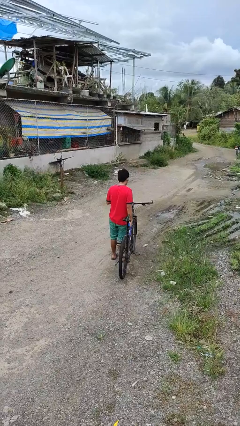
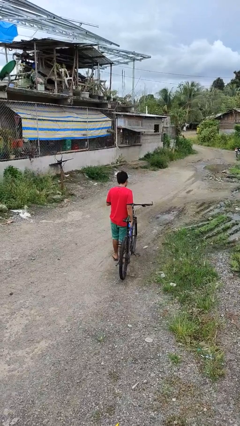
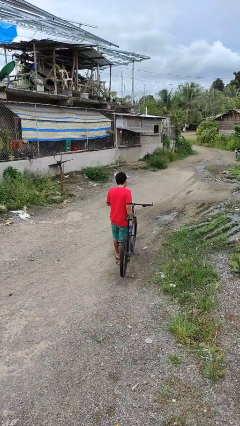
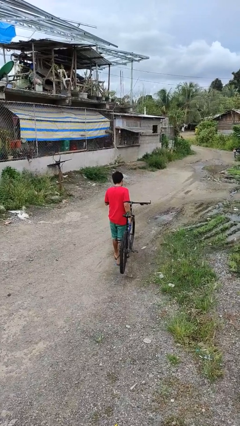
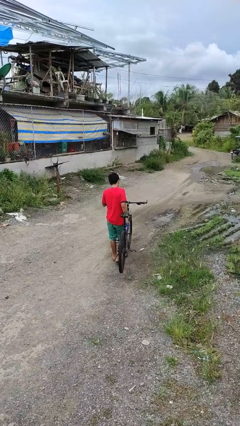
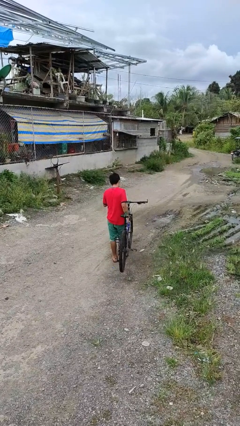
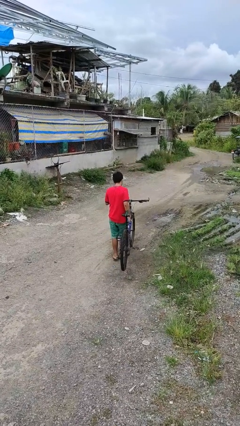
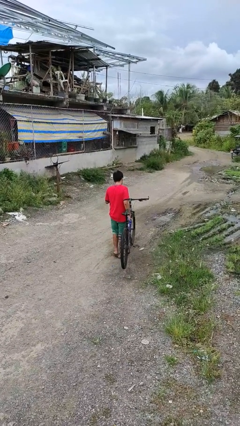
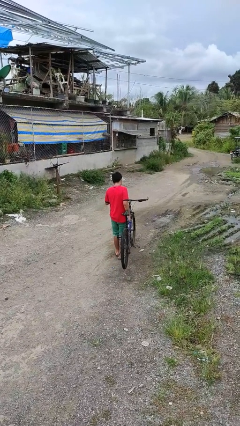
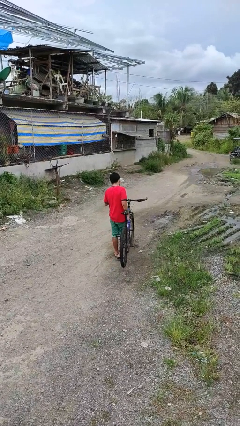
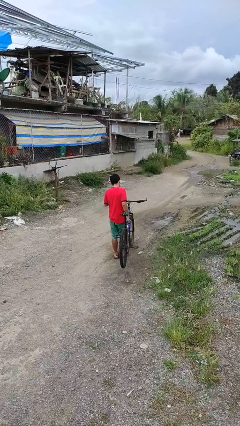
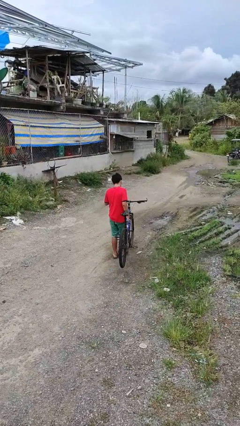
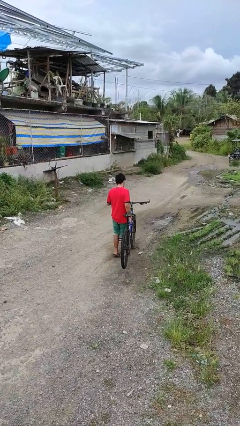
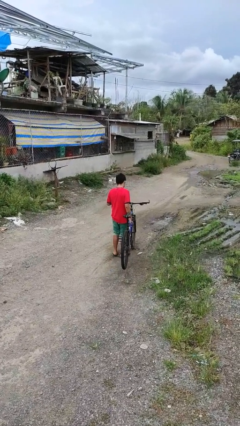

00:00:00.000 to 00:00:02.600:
person carries bicycle

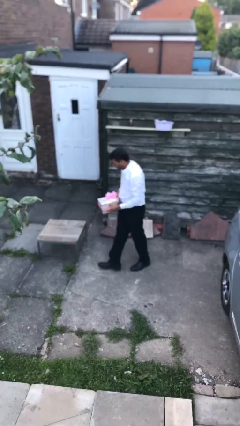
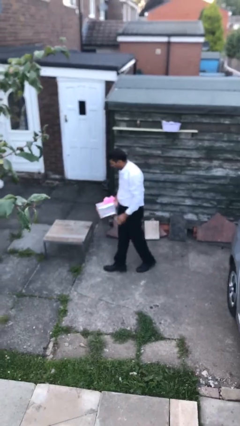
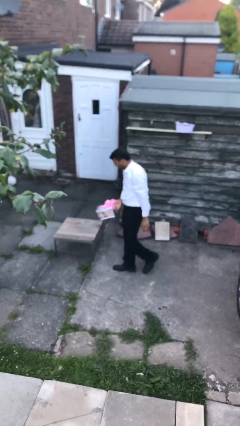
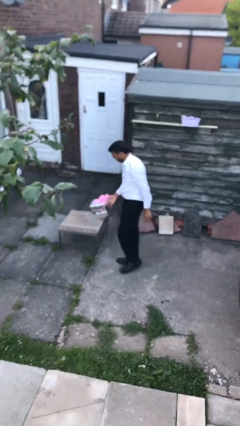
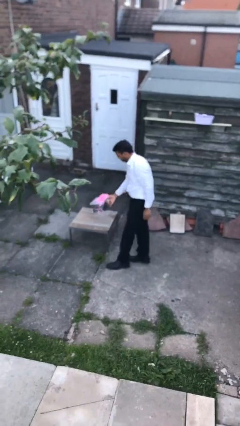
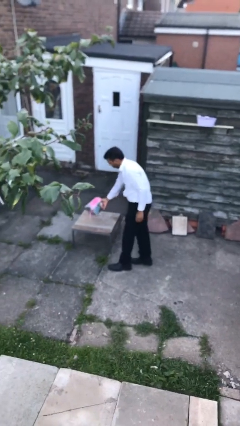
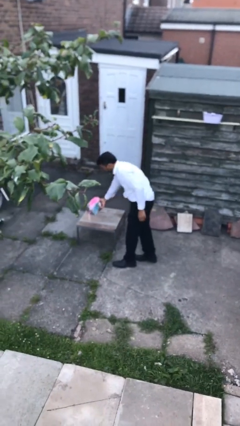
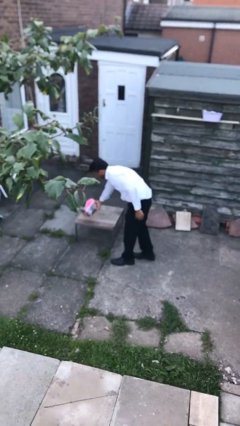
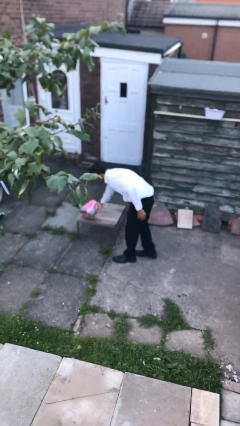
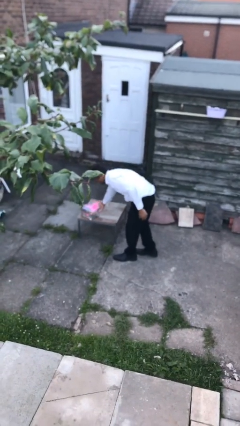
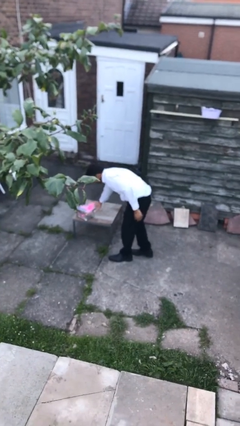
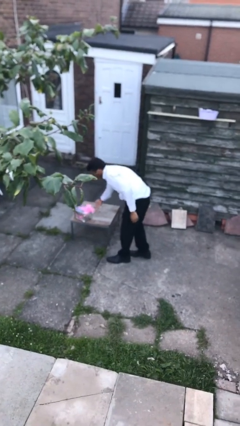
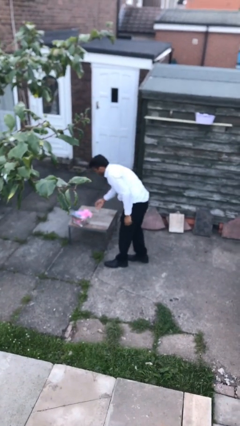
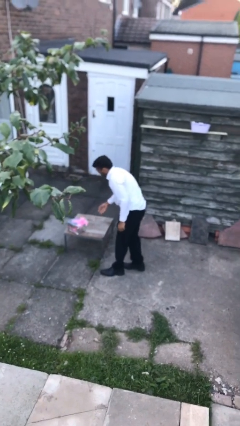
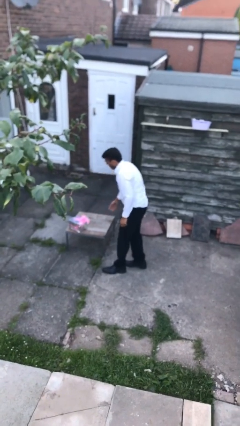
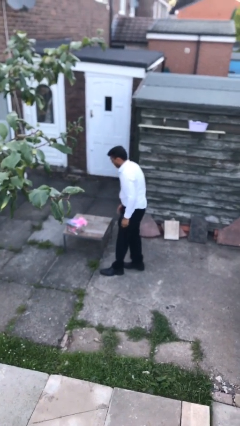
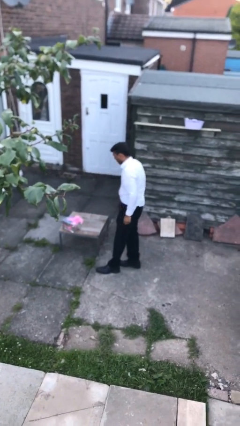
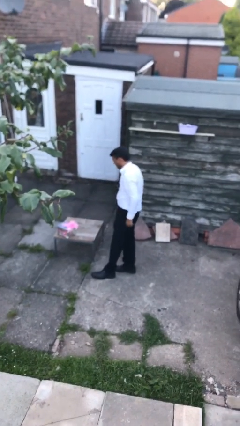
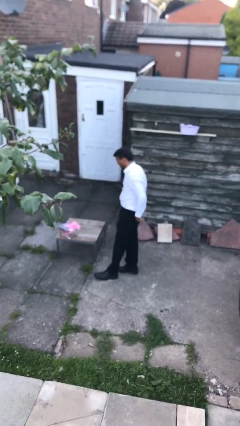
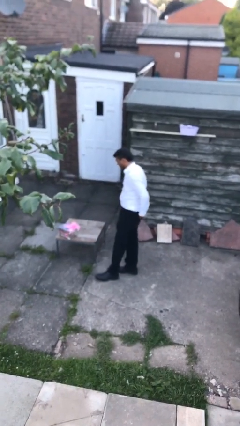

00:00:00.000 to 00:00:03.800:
person puts down object on table

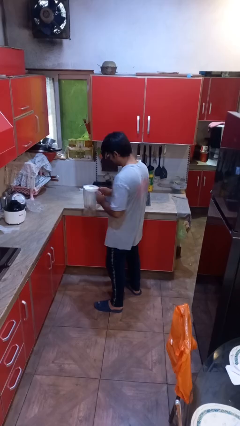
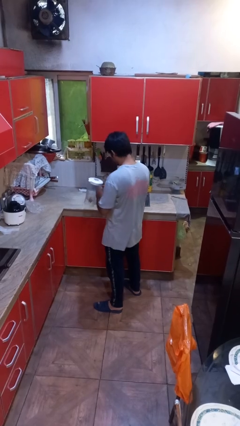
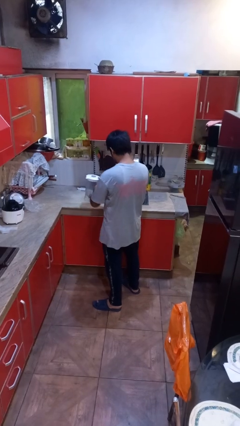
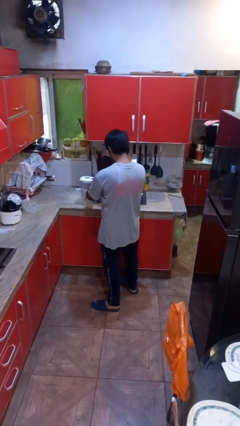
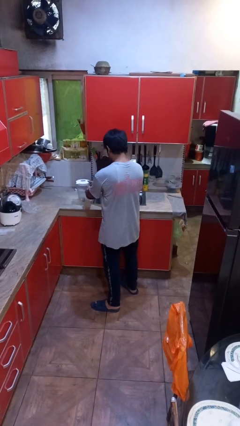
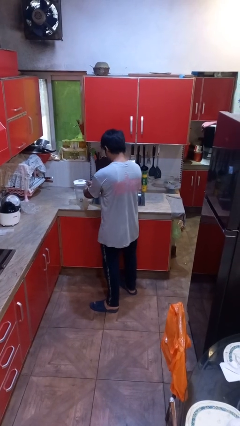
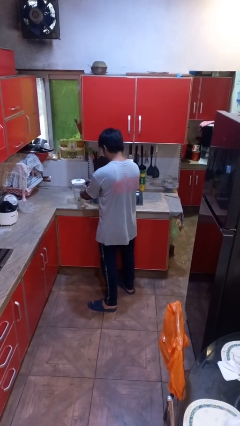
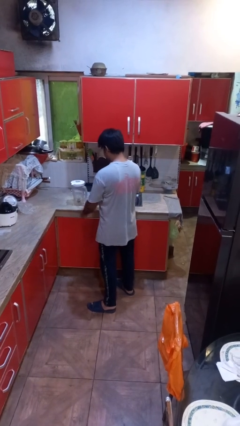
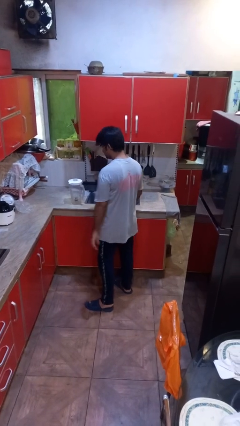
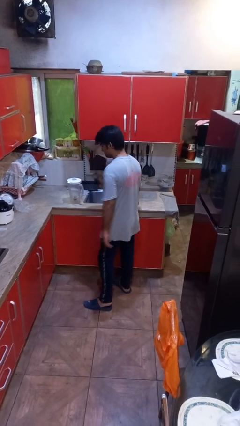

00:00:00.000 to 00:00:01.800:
person puts down object on countertop

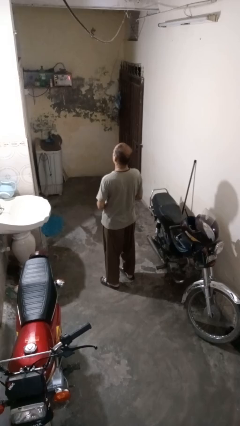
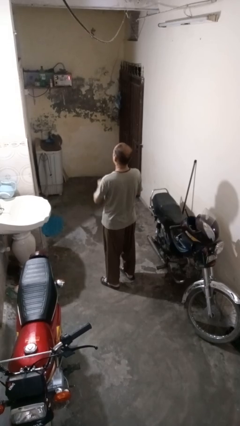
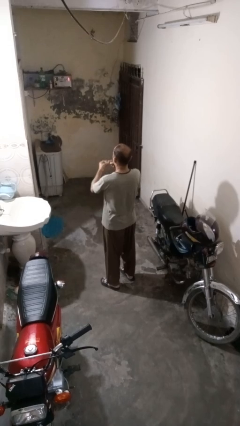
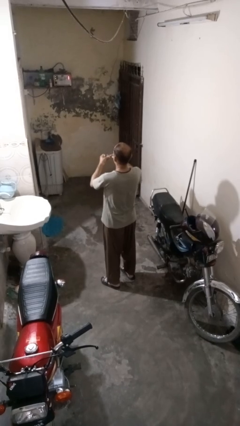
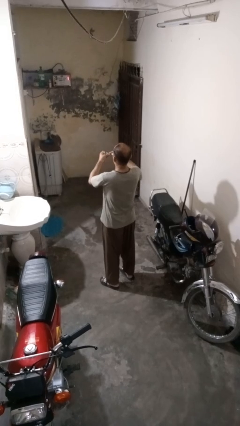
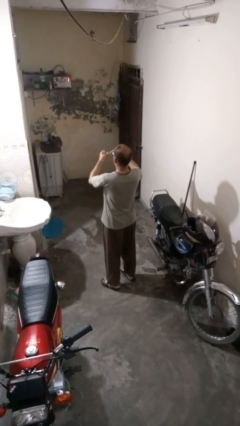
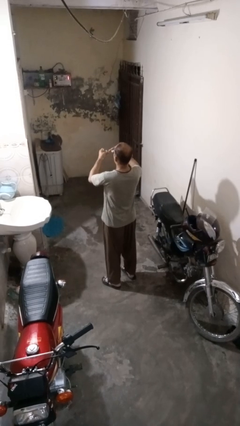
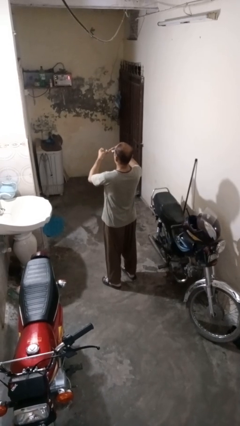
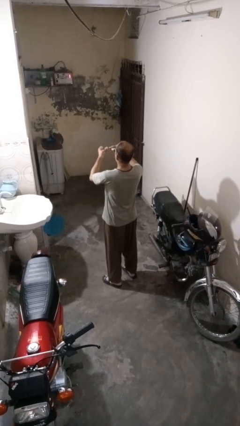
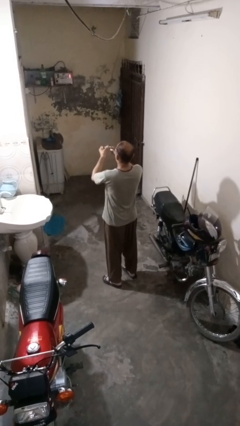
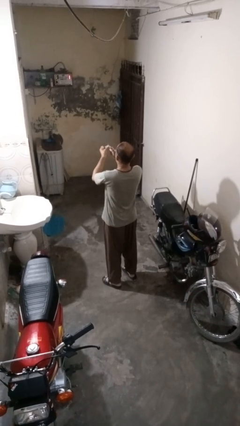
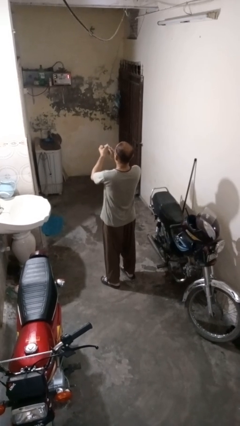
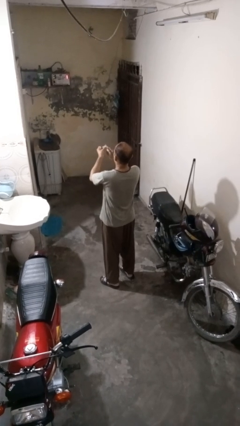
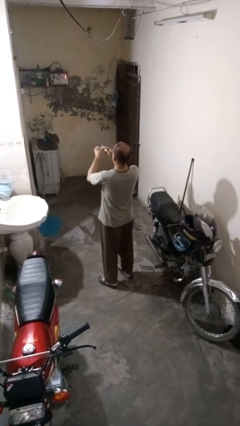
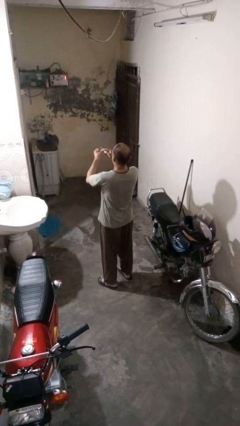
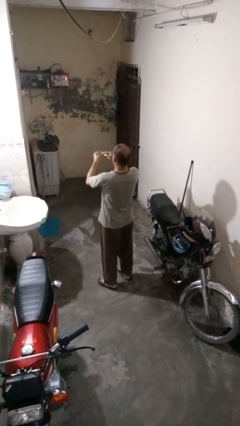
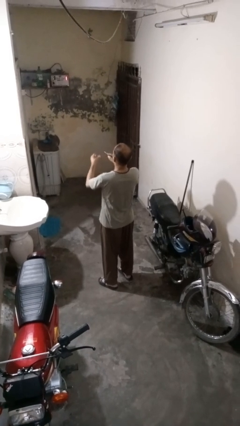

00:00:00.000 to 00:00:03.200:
person files fingernails

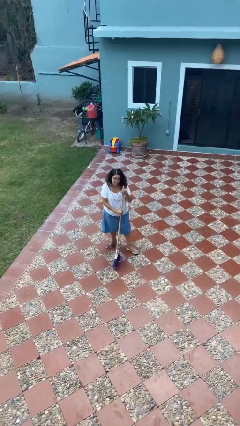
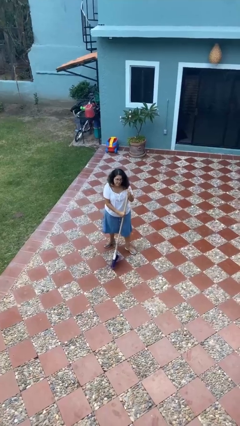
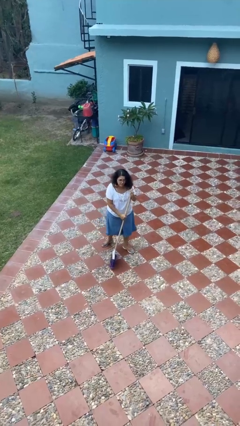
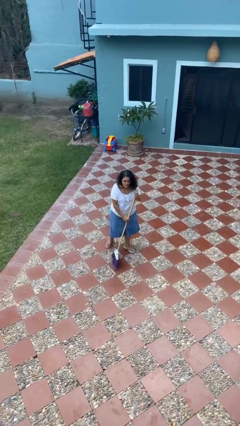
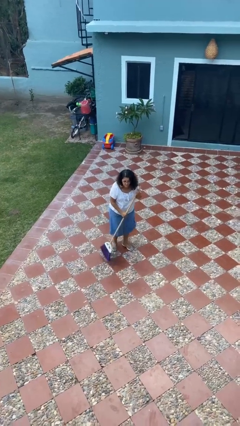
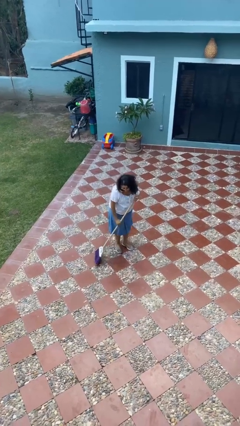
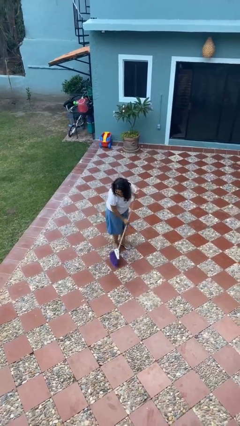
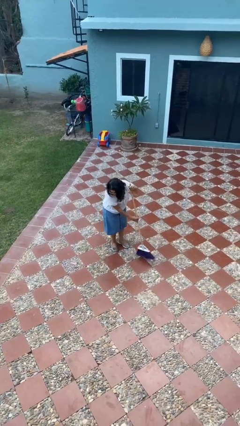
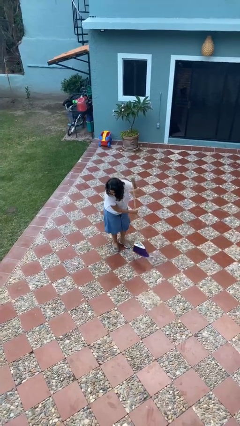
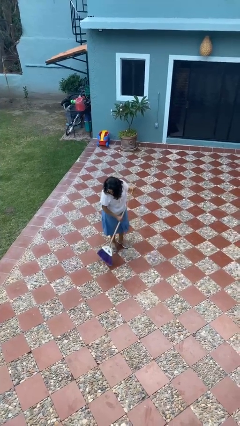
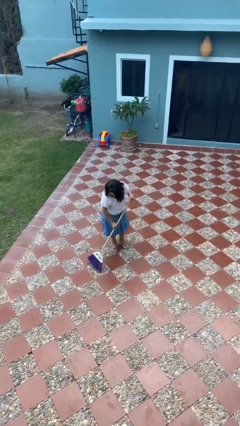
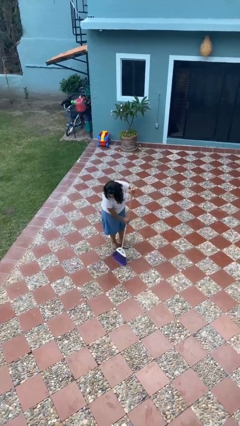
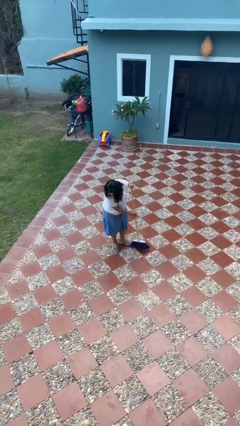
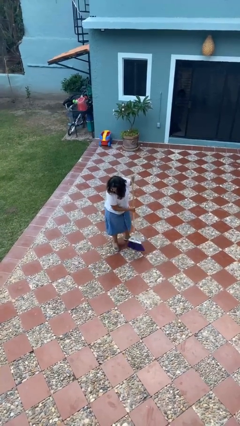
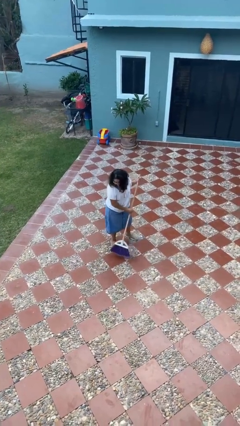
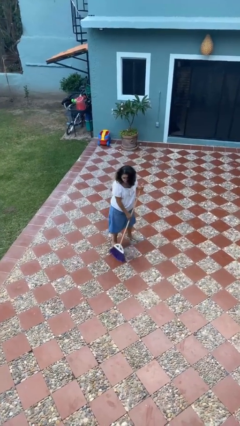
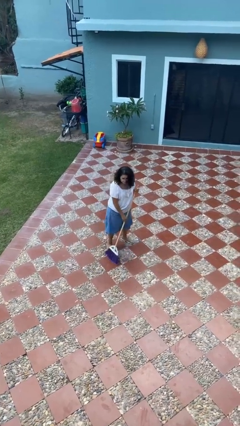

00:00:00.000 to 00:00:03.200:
person sweeps floor

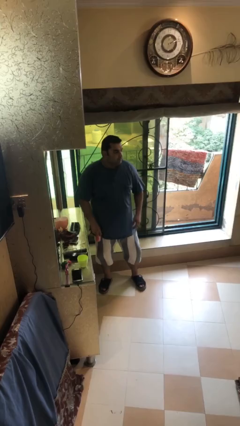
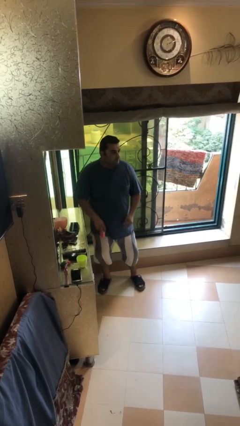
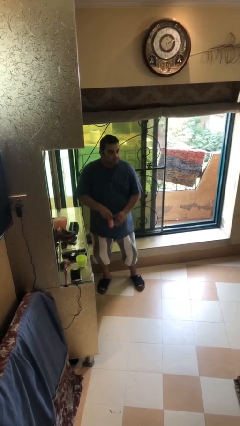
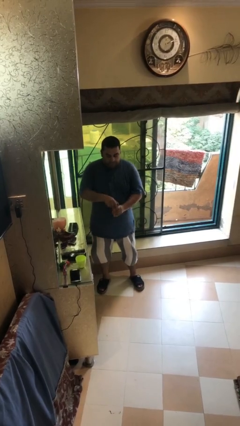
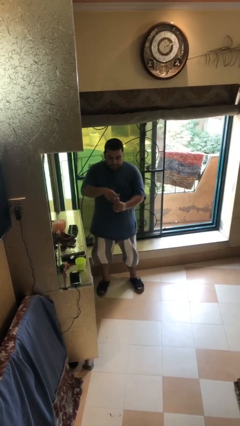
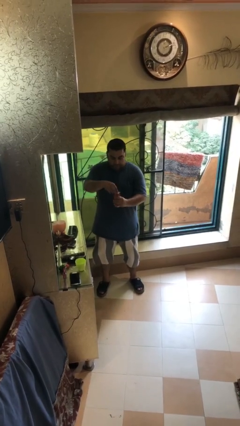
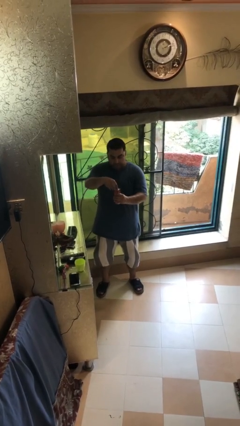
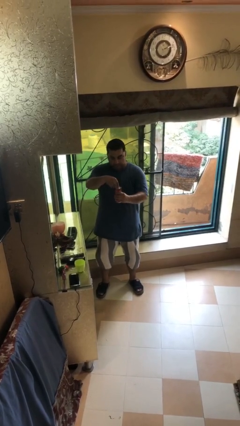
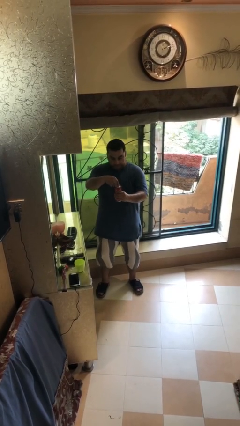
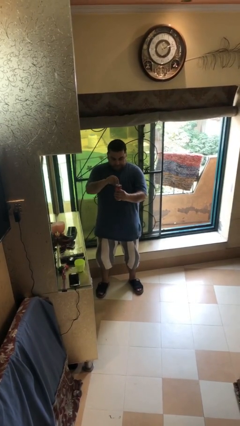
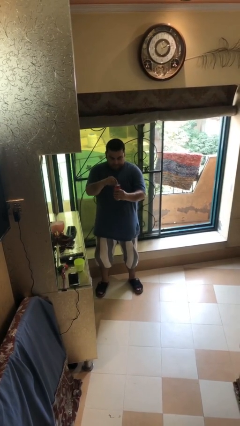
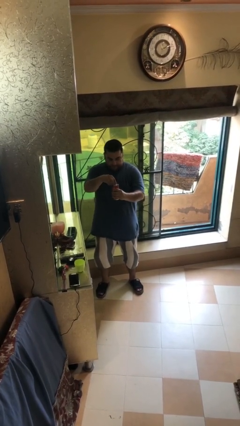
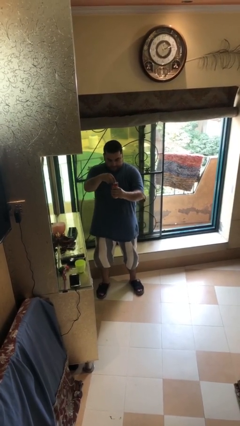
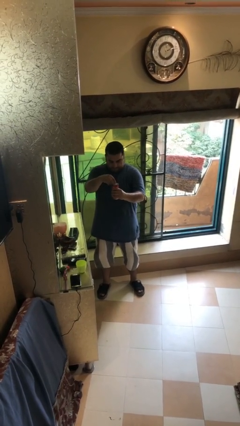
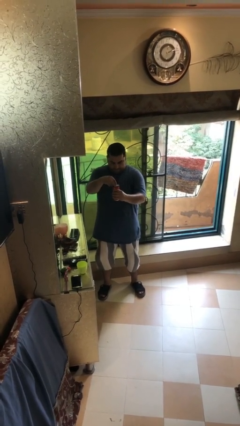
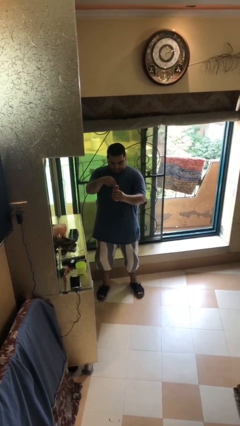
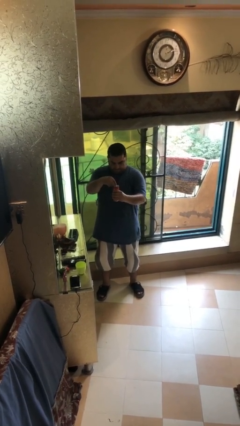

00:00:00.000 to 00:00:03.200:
person opens beverage can
